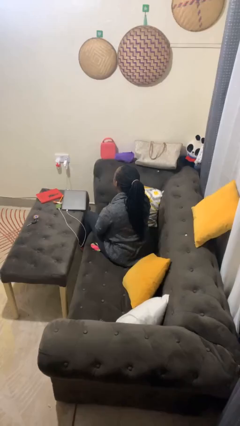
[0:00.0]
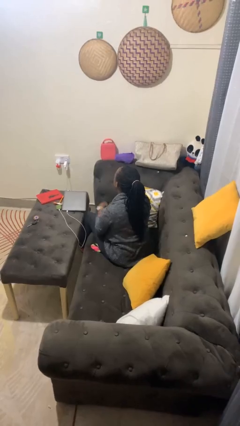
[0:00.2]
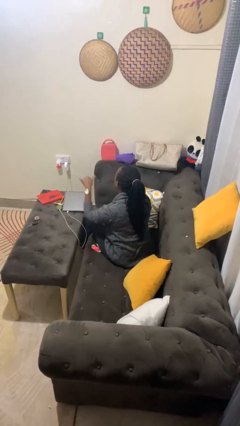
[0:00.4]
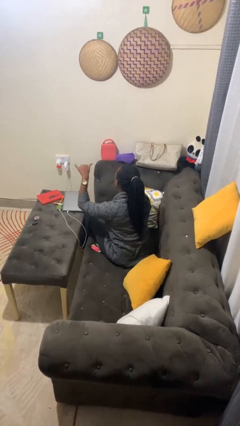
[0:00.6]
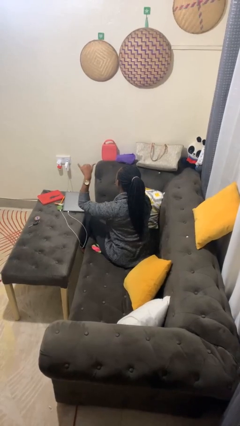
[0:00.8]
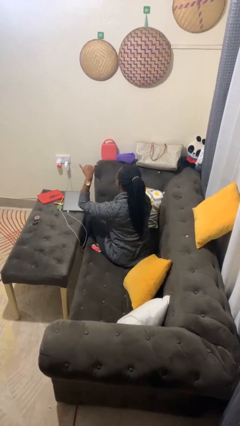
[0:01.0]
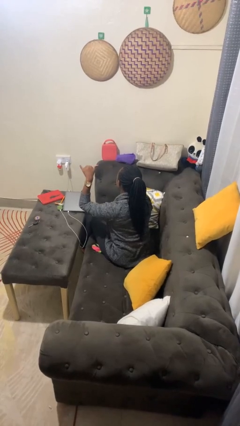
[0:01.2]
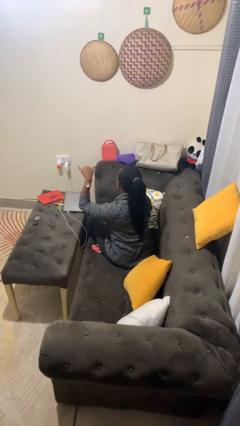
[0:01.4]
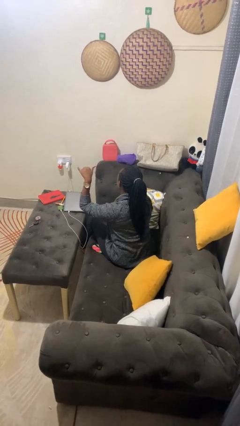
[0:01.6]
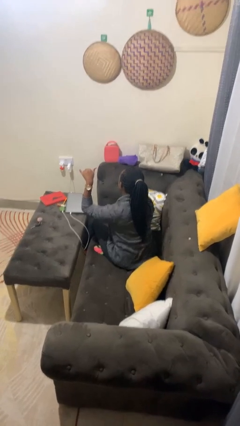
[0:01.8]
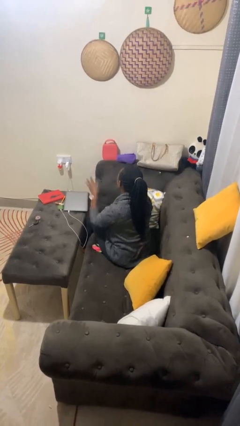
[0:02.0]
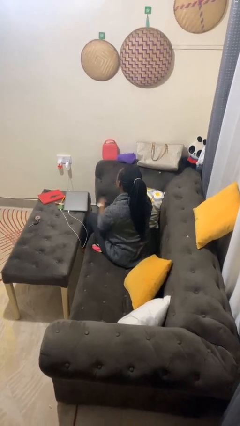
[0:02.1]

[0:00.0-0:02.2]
person gestures hang loose

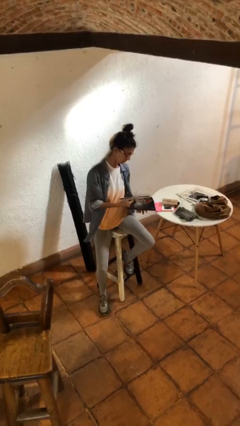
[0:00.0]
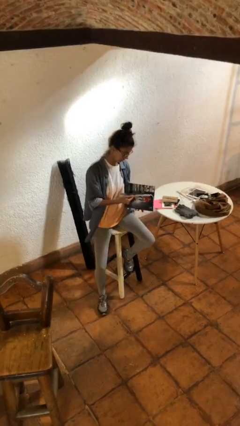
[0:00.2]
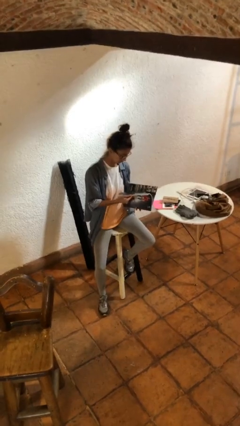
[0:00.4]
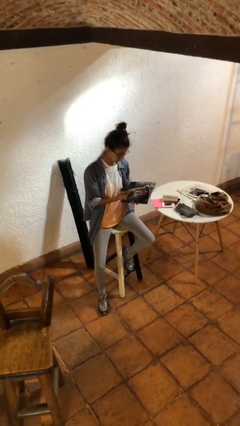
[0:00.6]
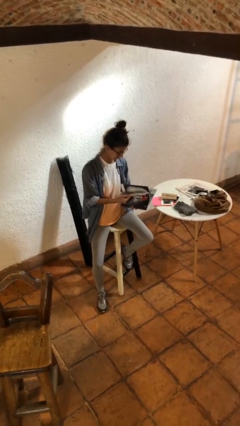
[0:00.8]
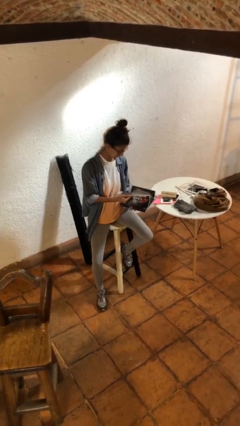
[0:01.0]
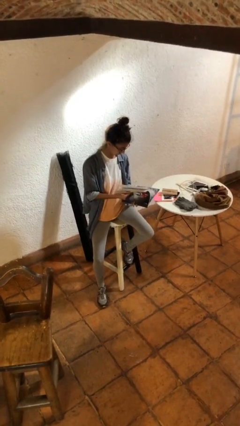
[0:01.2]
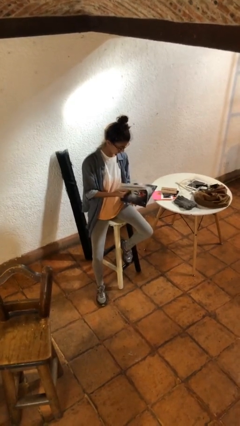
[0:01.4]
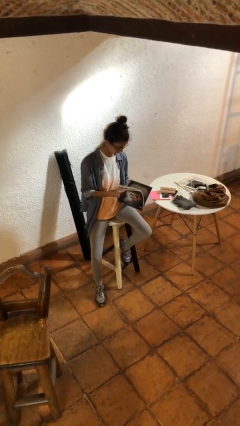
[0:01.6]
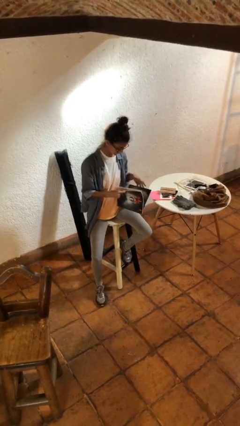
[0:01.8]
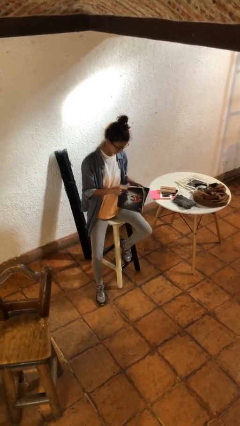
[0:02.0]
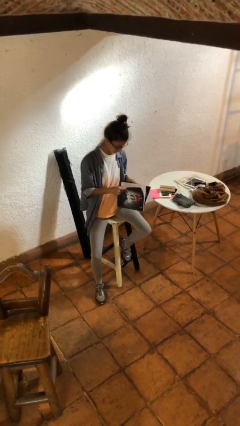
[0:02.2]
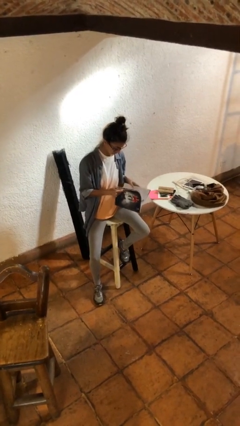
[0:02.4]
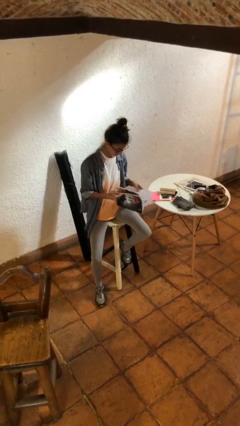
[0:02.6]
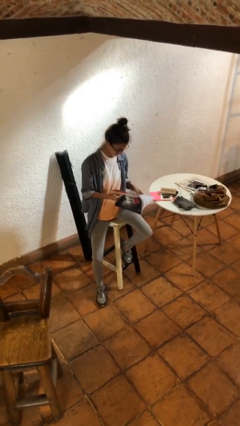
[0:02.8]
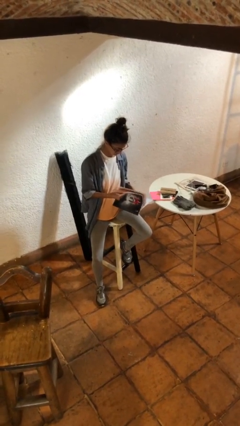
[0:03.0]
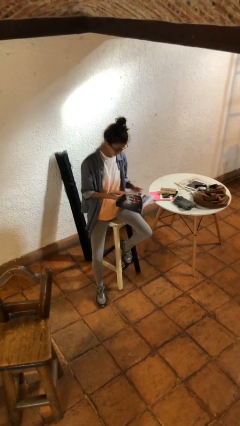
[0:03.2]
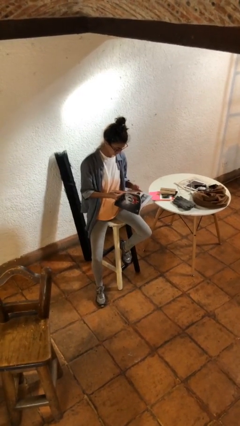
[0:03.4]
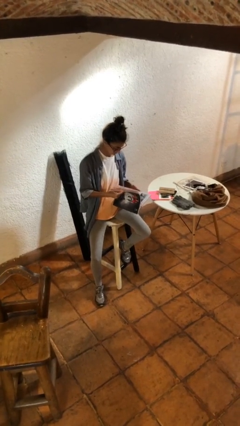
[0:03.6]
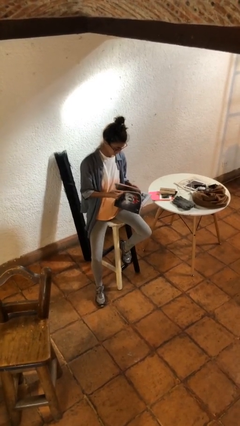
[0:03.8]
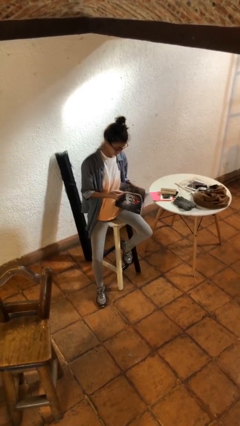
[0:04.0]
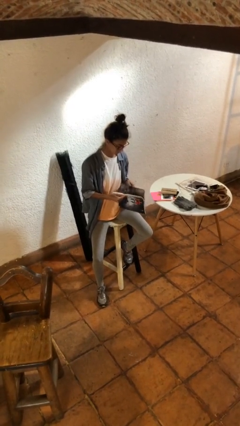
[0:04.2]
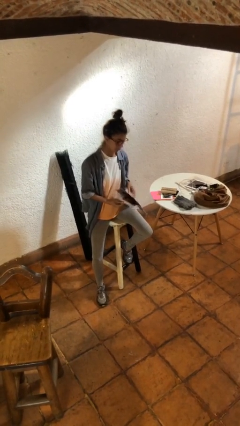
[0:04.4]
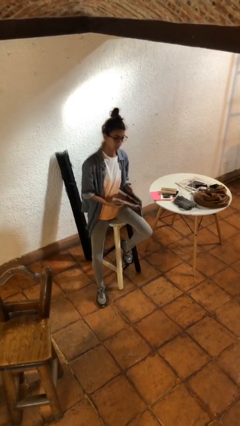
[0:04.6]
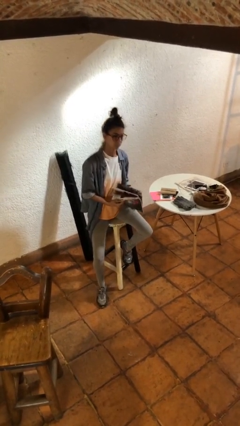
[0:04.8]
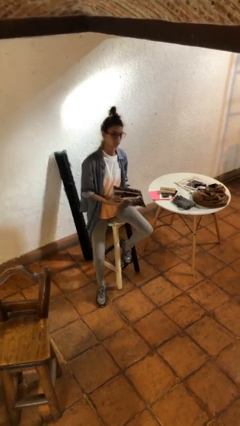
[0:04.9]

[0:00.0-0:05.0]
person reads magazine

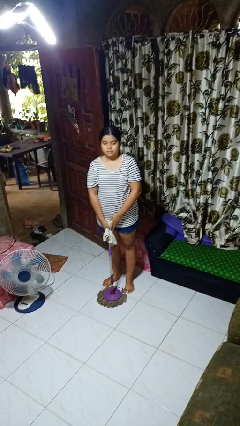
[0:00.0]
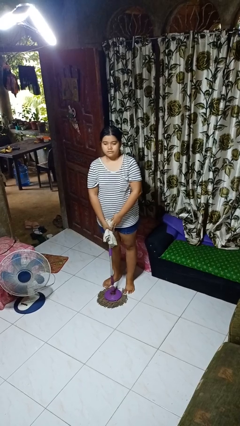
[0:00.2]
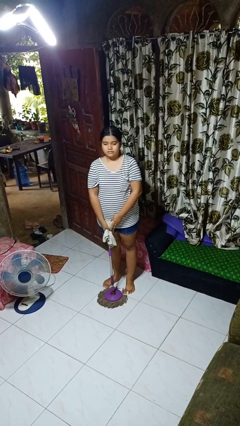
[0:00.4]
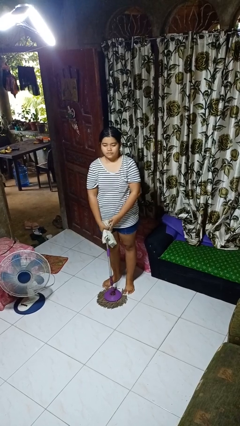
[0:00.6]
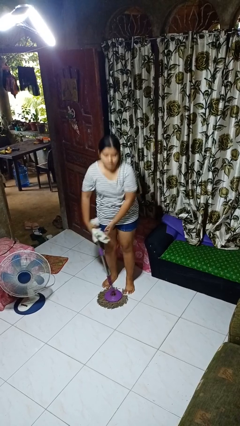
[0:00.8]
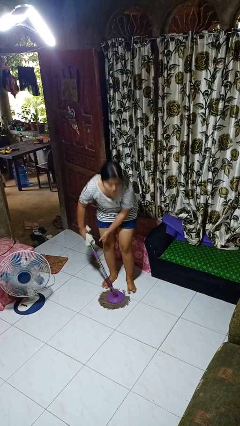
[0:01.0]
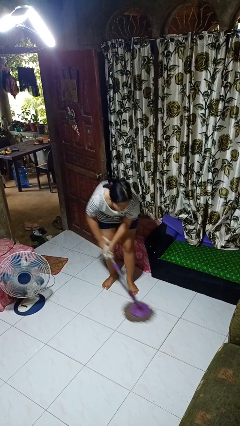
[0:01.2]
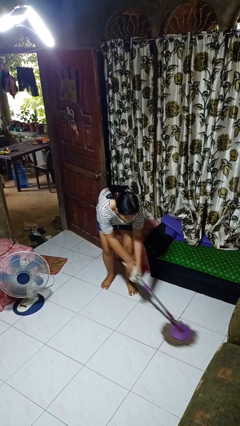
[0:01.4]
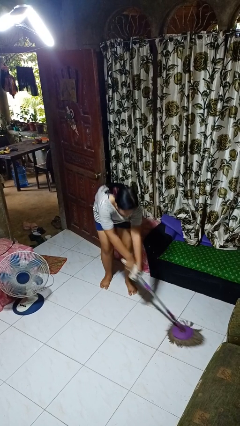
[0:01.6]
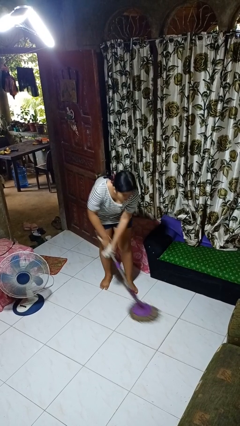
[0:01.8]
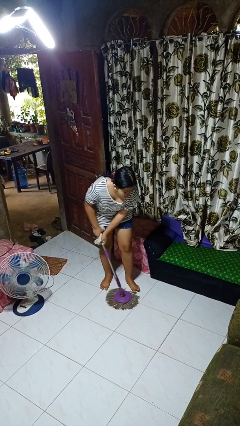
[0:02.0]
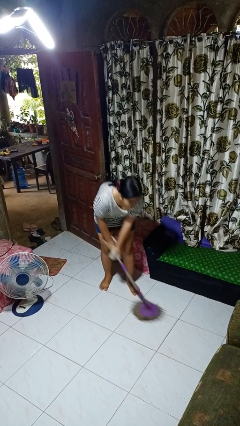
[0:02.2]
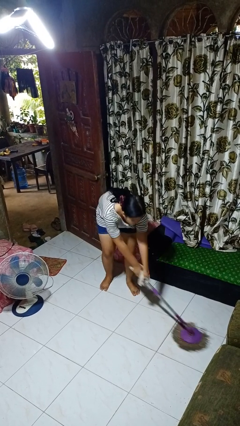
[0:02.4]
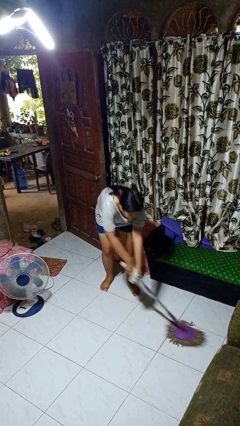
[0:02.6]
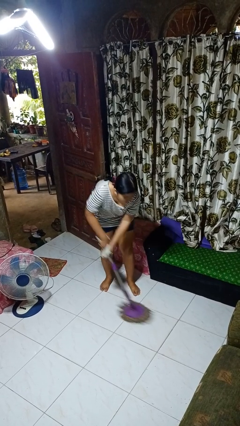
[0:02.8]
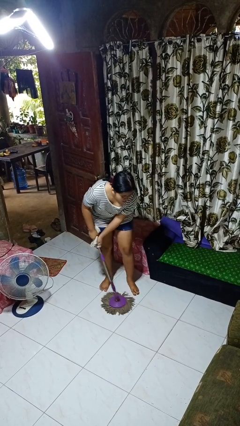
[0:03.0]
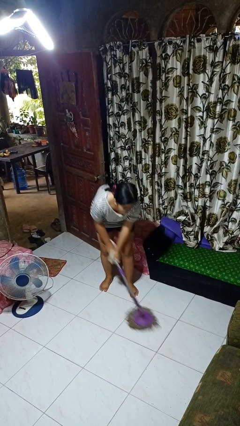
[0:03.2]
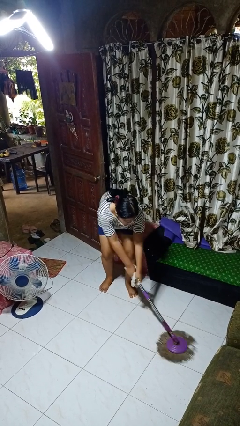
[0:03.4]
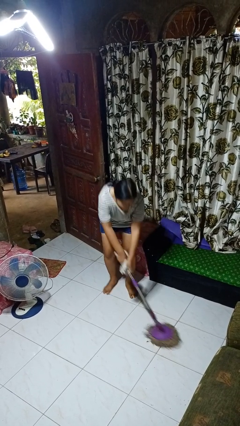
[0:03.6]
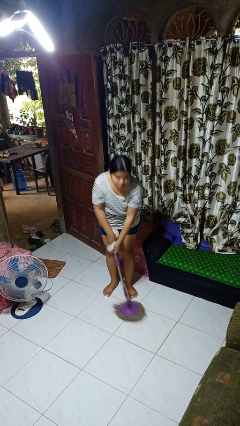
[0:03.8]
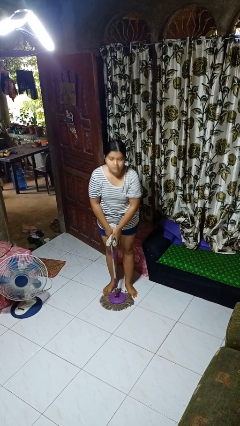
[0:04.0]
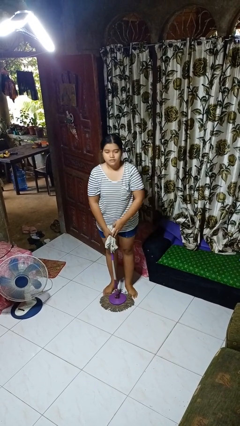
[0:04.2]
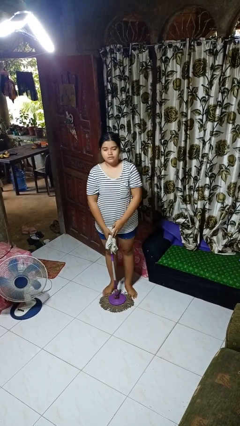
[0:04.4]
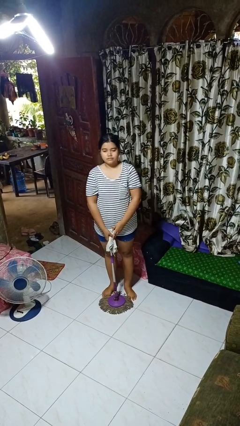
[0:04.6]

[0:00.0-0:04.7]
person mops

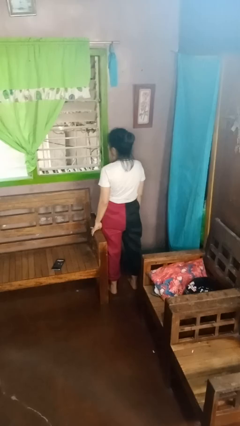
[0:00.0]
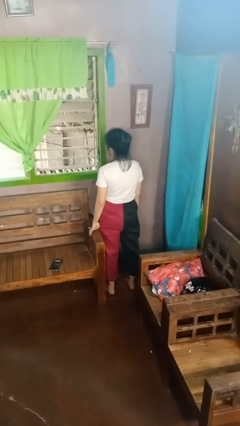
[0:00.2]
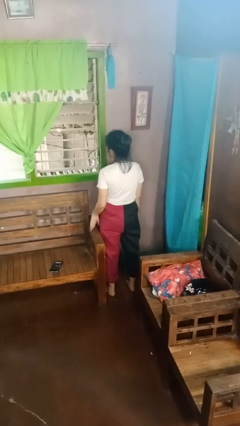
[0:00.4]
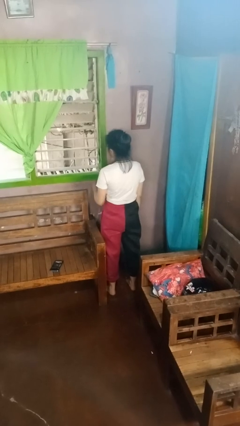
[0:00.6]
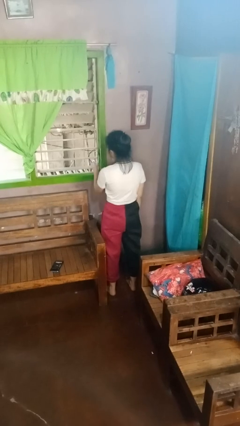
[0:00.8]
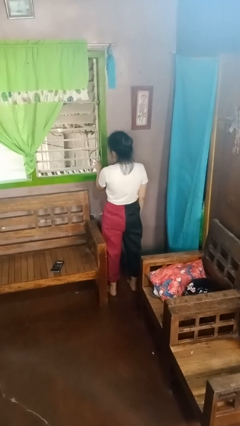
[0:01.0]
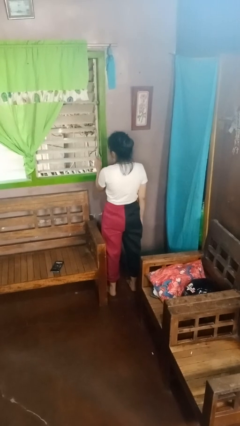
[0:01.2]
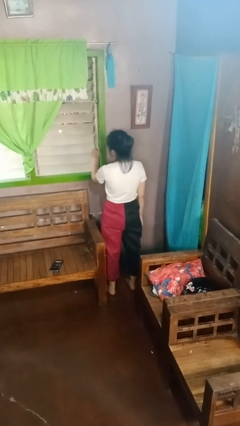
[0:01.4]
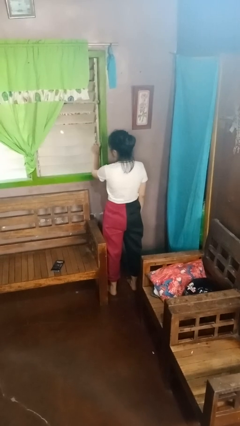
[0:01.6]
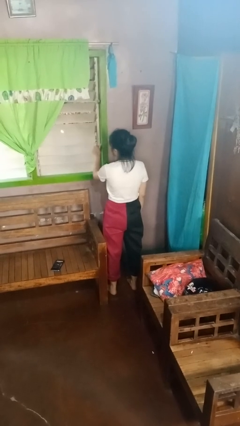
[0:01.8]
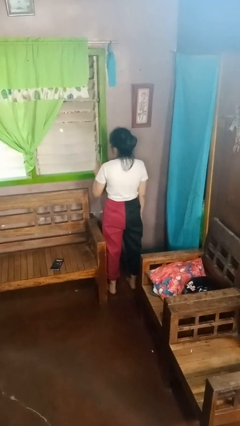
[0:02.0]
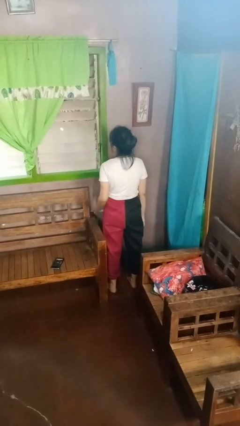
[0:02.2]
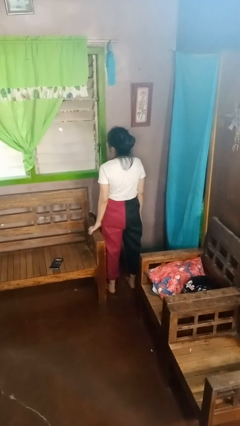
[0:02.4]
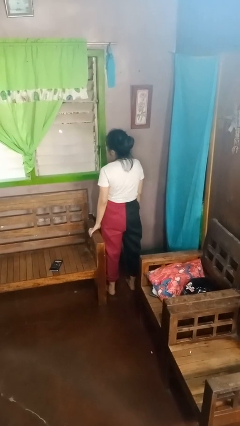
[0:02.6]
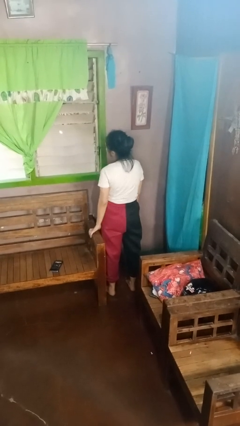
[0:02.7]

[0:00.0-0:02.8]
person closes home window

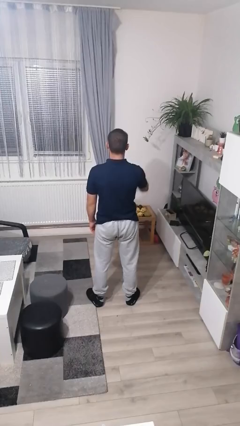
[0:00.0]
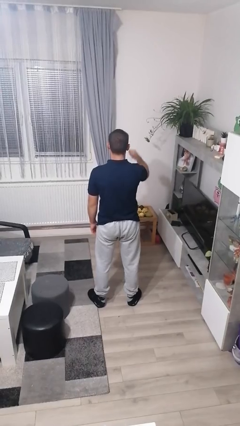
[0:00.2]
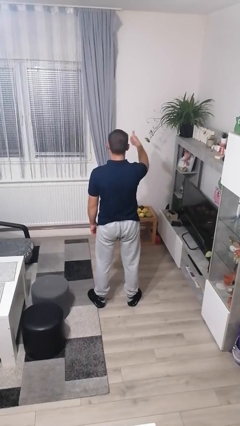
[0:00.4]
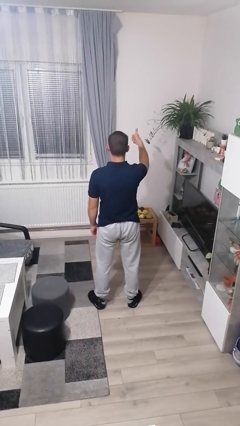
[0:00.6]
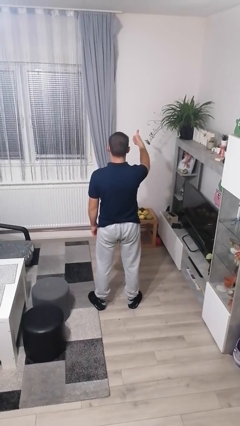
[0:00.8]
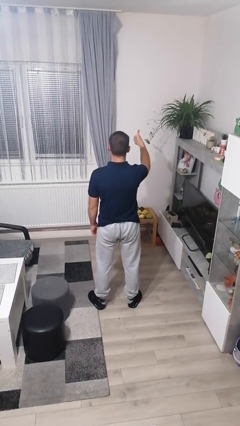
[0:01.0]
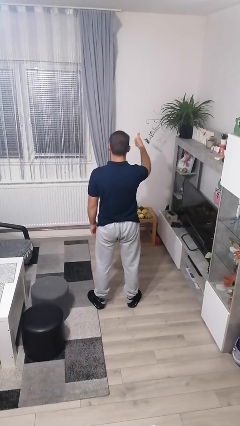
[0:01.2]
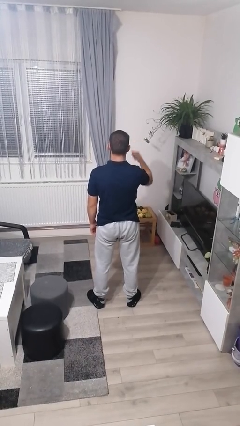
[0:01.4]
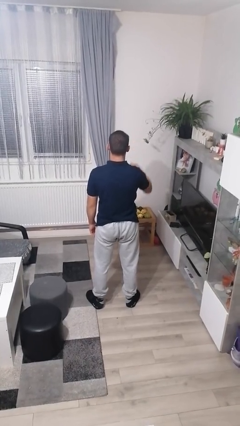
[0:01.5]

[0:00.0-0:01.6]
person gestures number one

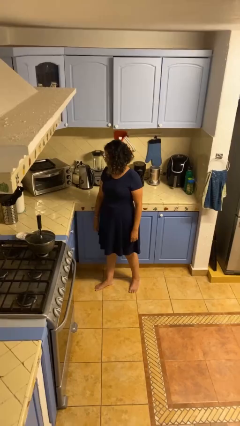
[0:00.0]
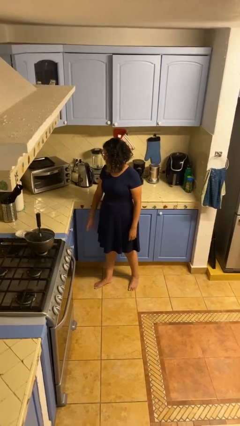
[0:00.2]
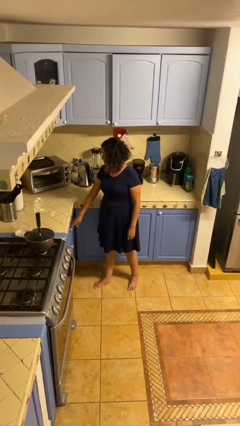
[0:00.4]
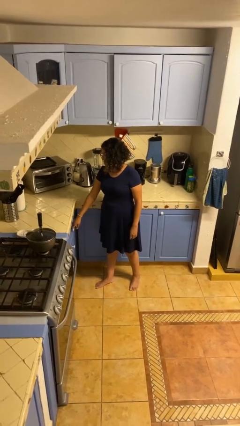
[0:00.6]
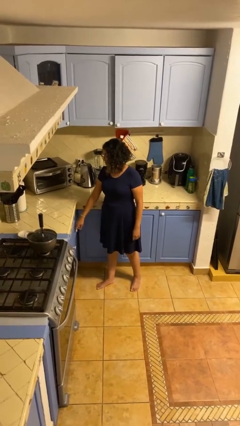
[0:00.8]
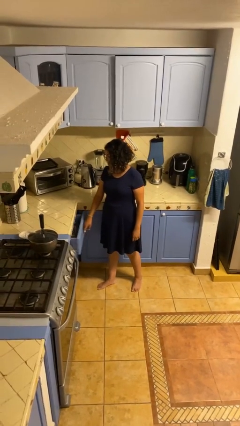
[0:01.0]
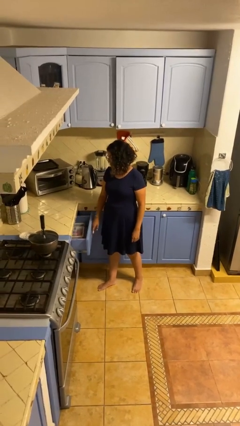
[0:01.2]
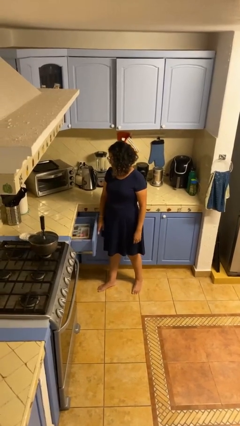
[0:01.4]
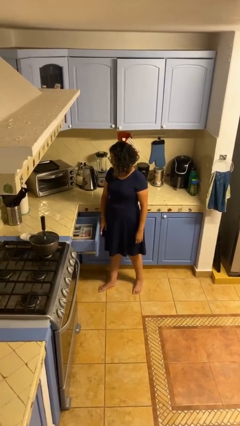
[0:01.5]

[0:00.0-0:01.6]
person opens kitchen drawer
